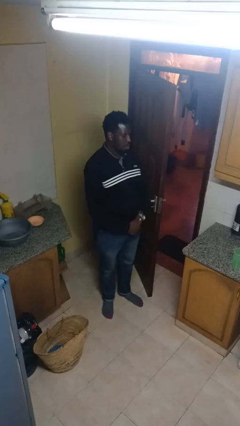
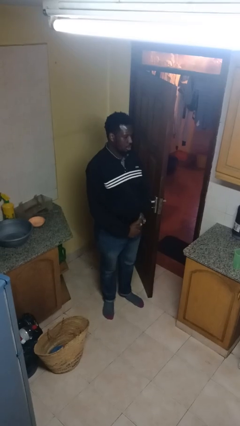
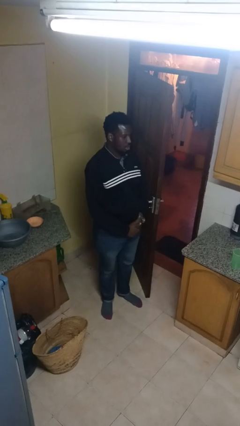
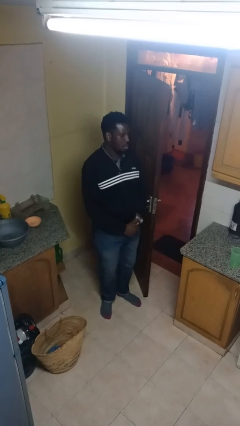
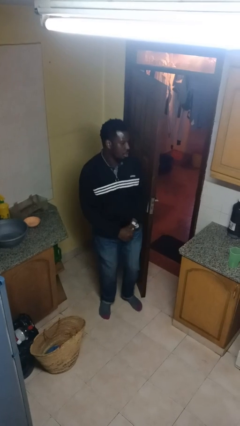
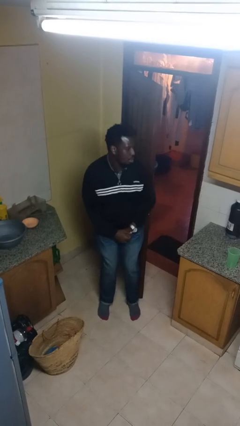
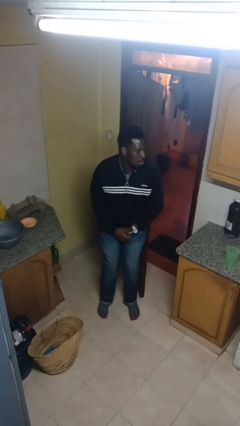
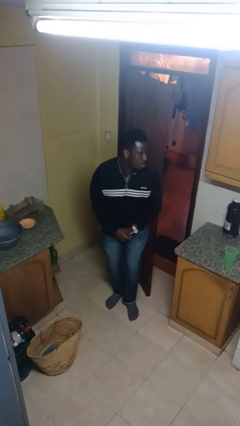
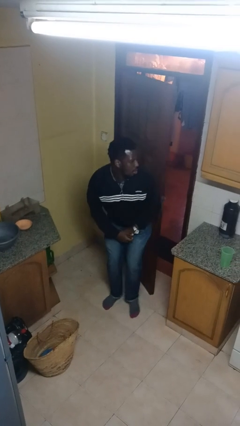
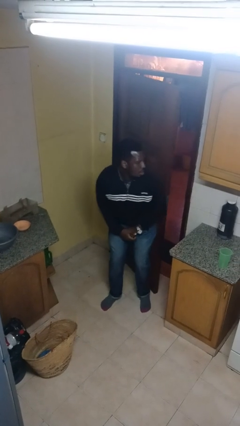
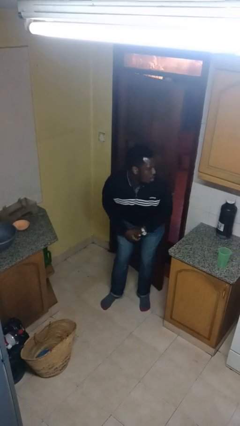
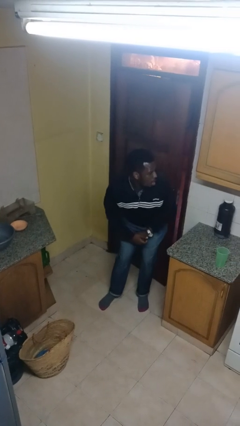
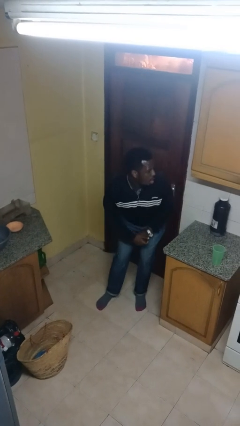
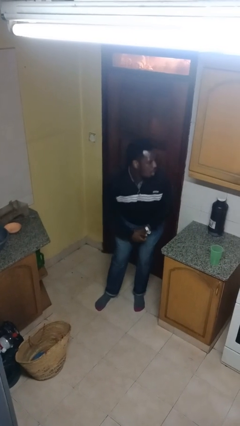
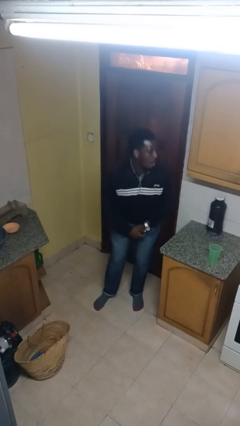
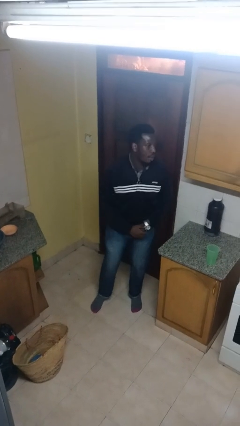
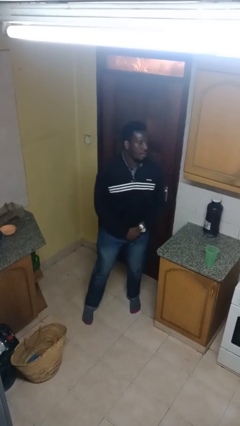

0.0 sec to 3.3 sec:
person closes door with hip

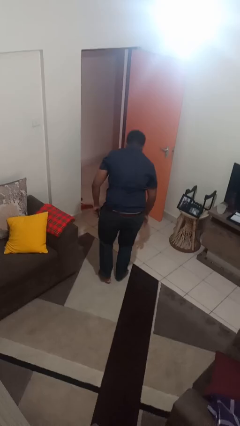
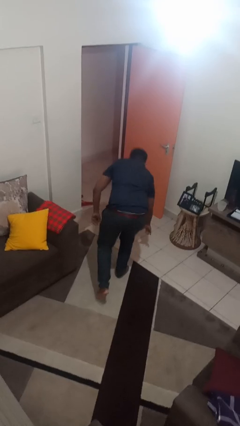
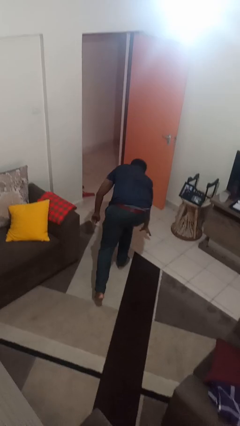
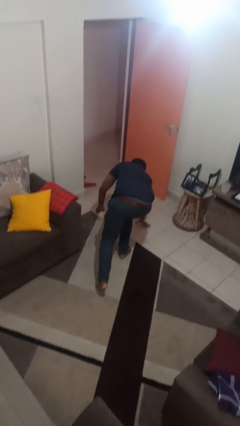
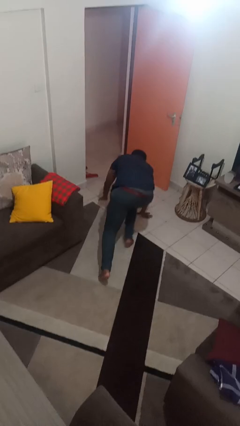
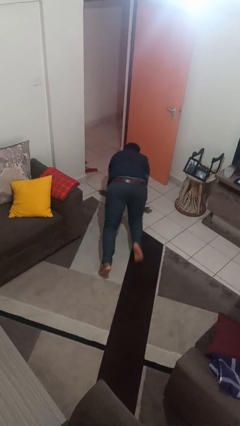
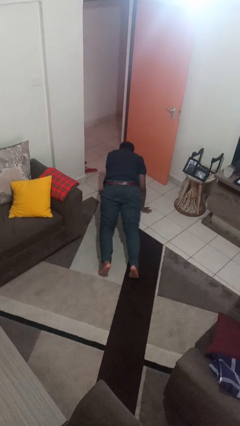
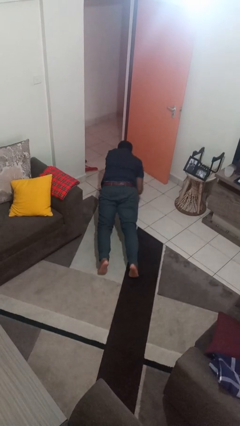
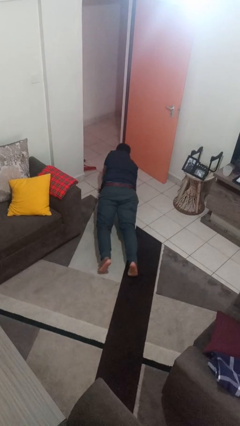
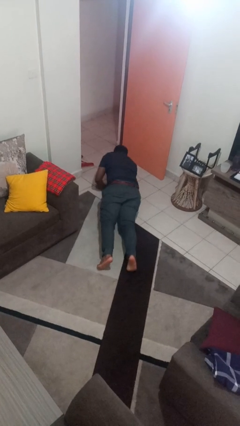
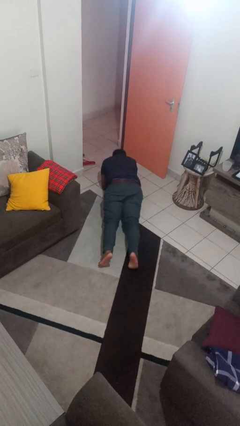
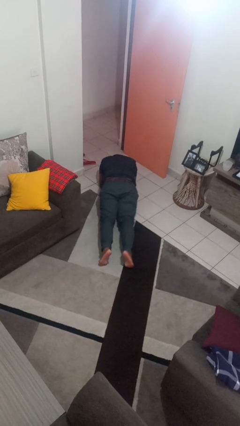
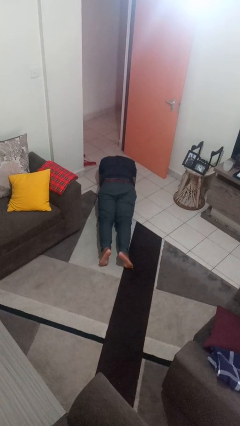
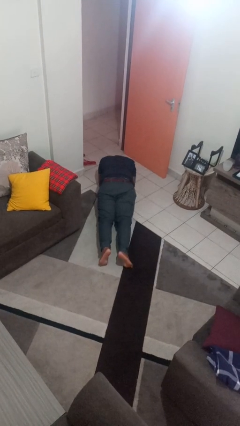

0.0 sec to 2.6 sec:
person exercises with plank

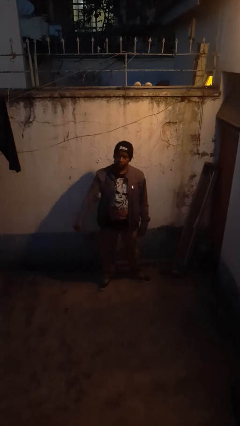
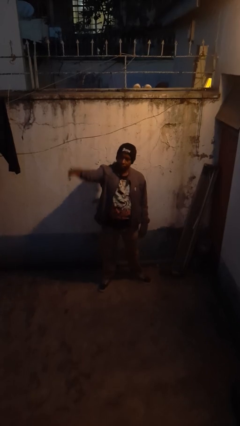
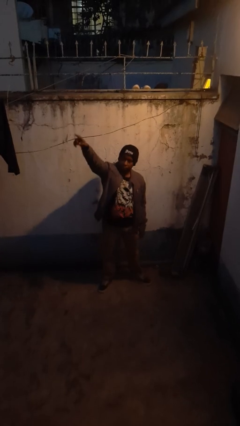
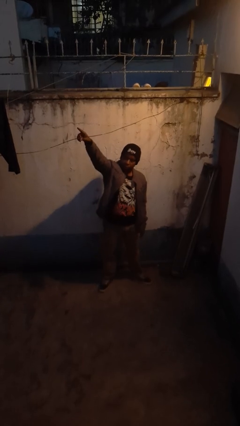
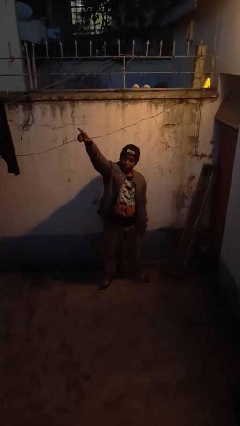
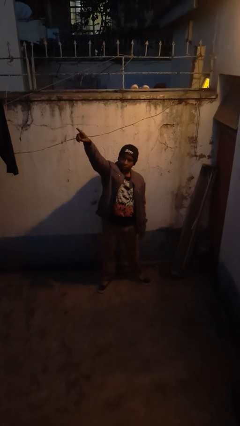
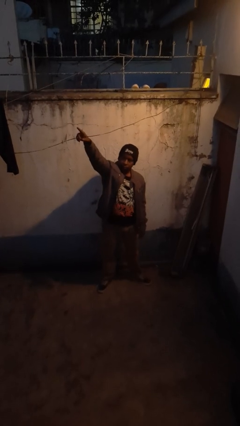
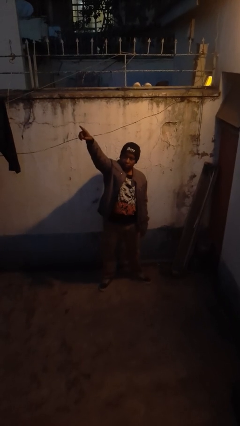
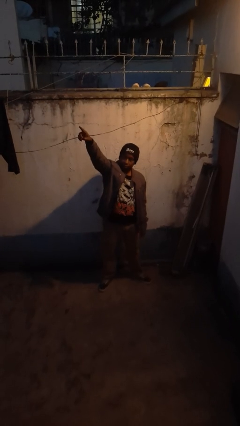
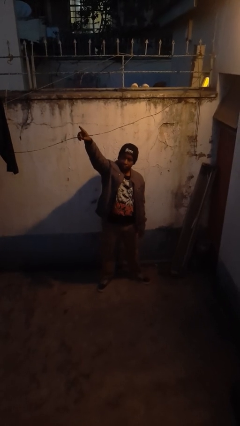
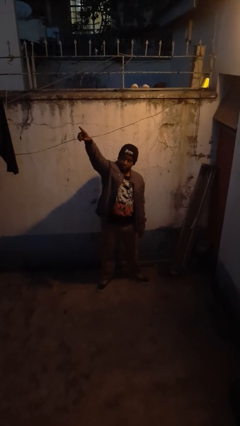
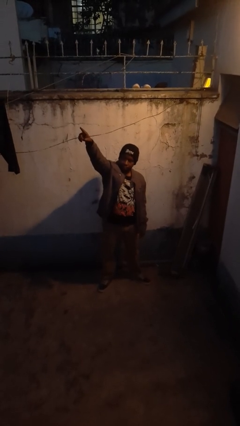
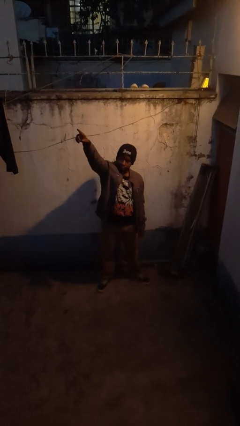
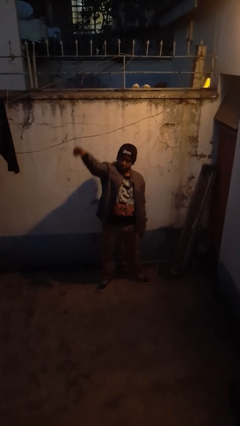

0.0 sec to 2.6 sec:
person points at person

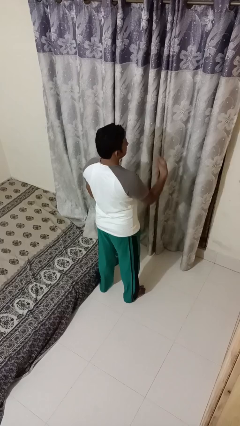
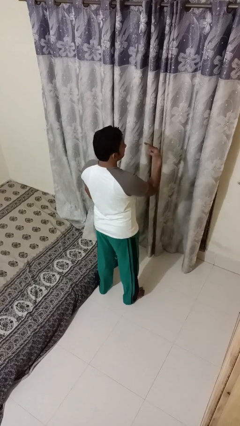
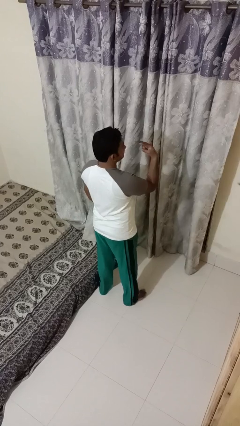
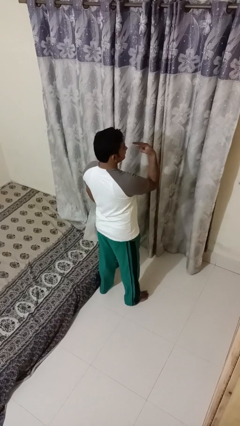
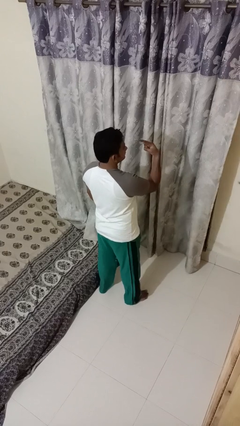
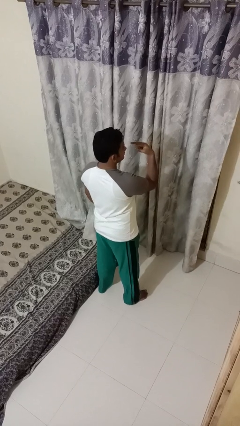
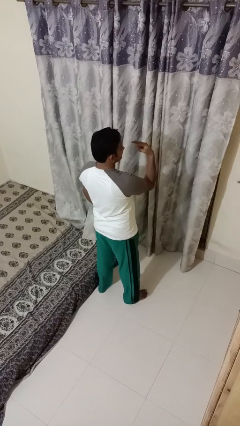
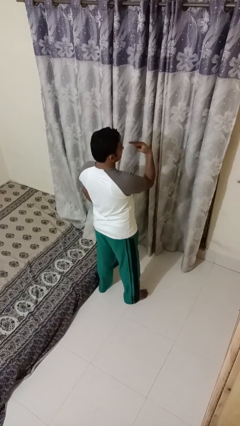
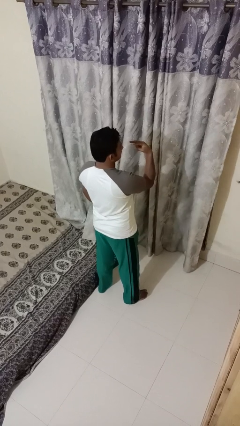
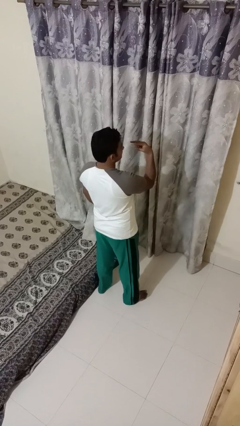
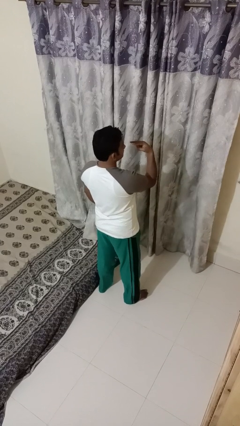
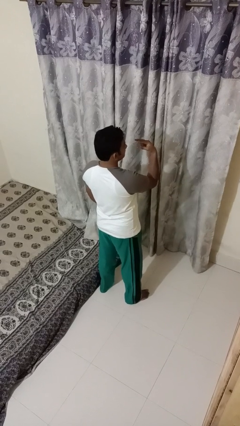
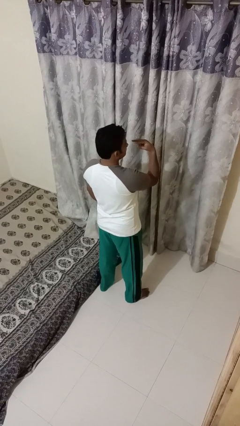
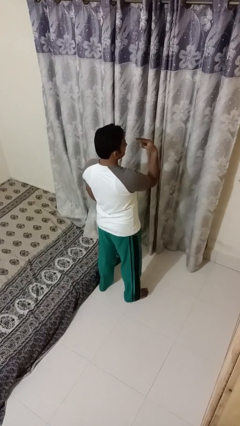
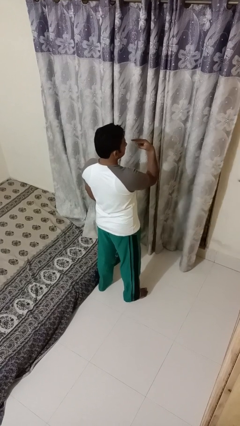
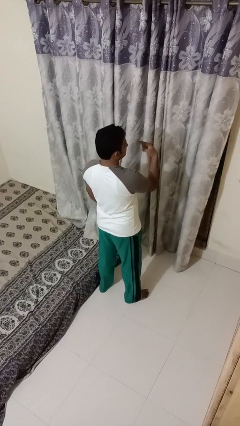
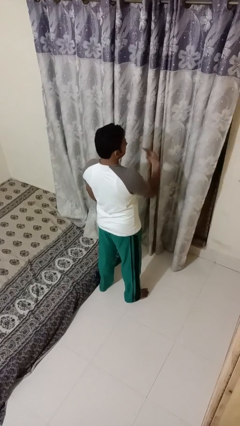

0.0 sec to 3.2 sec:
person gestures watch closely

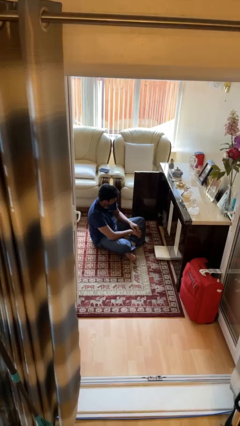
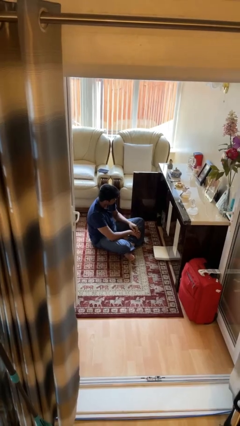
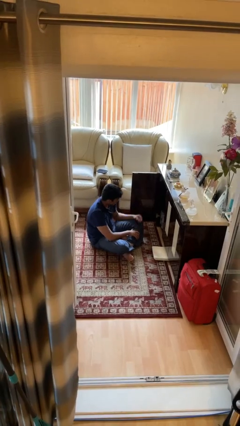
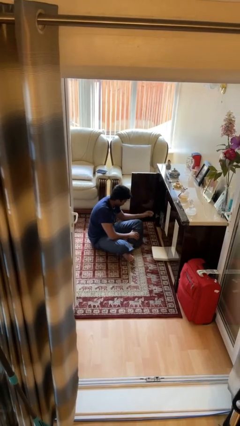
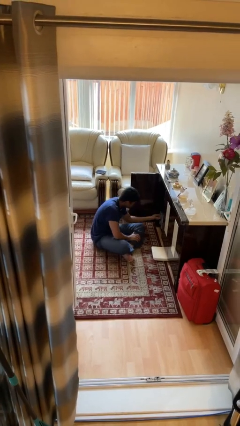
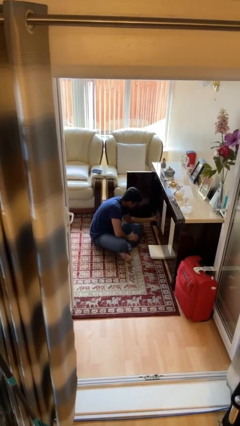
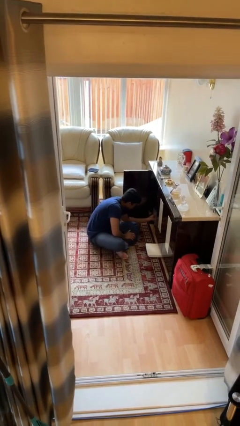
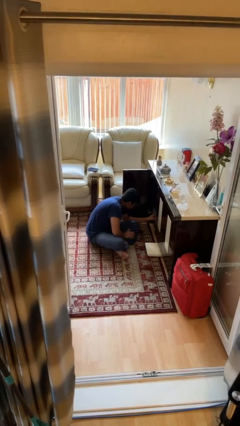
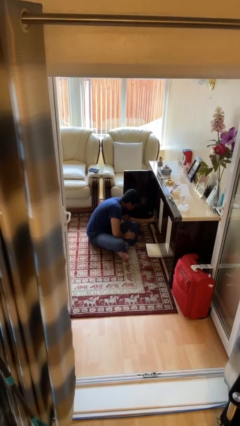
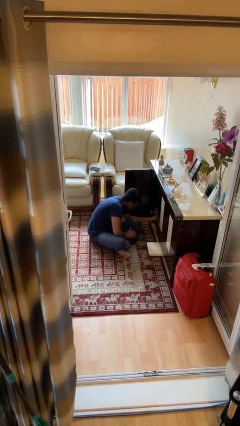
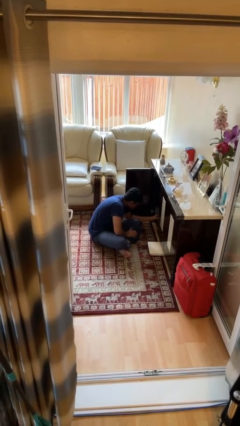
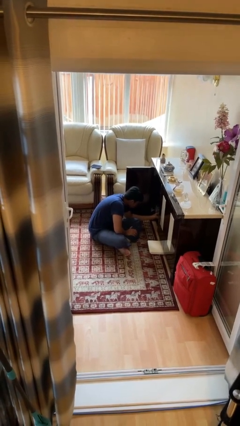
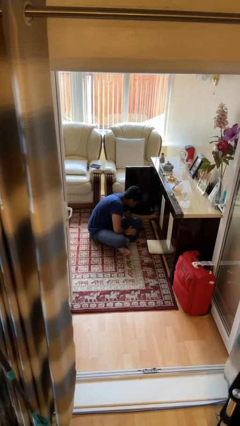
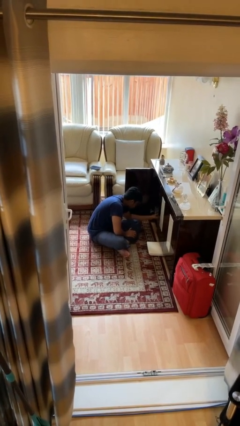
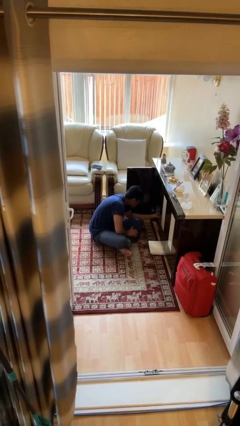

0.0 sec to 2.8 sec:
person searches in cabinet

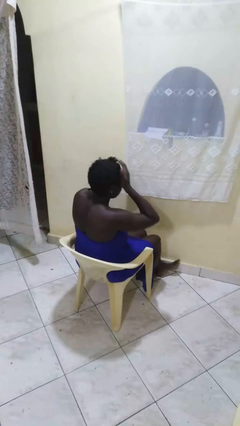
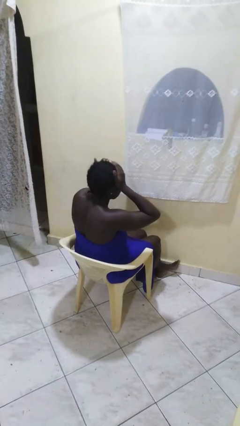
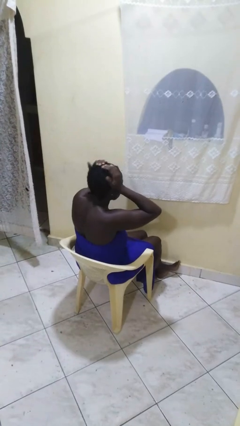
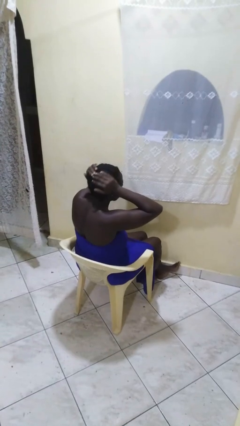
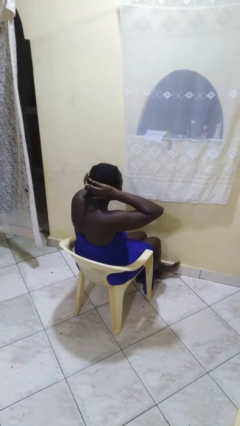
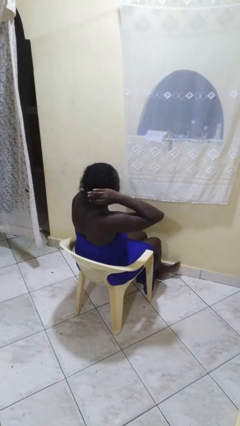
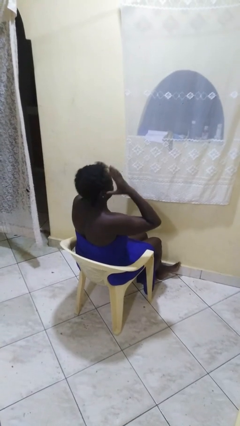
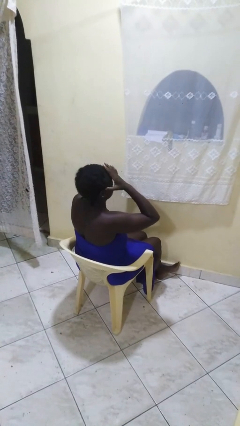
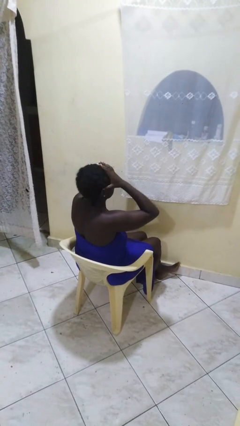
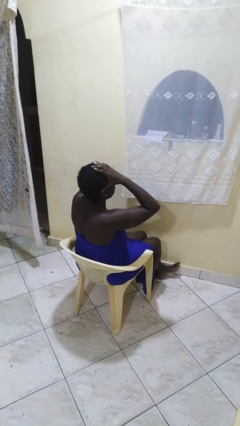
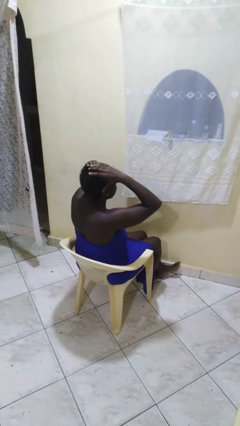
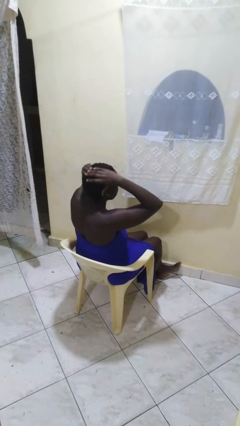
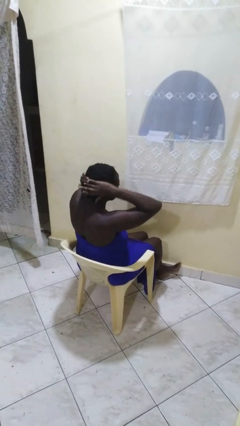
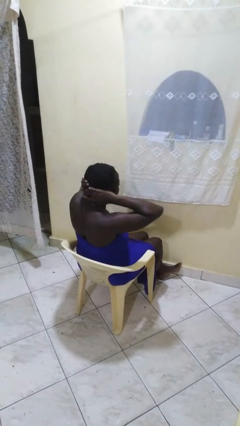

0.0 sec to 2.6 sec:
person strokes hair

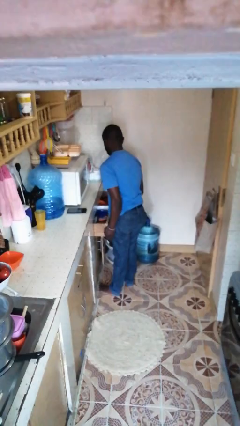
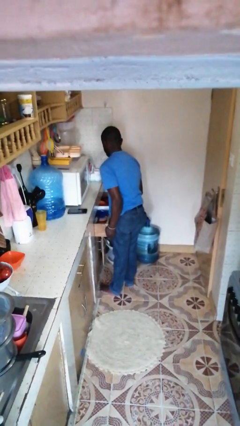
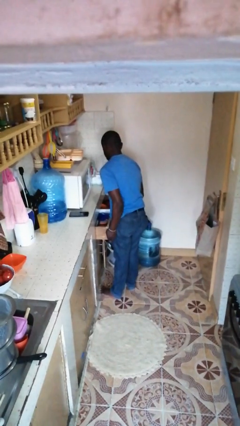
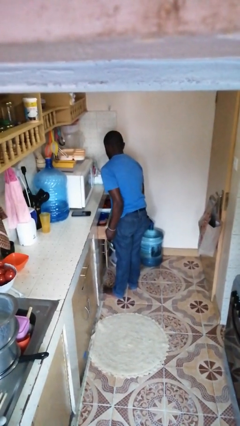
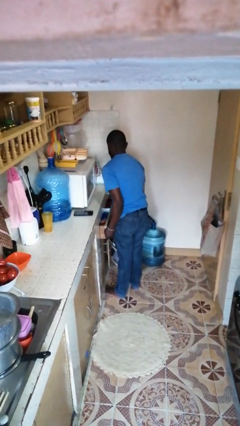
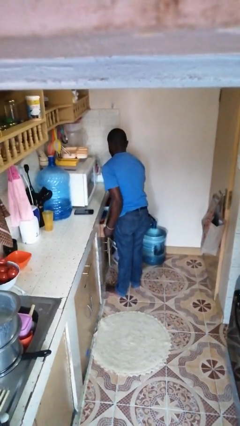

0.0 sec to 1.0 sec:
person closes kitchen drawer
